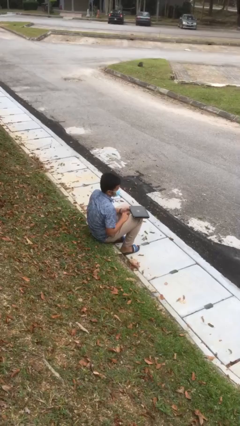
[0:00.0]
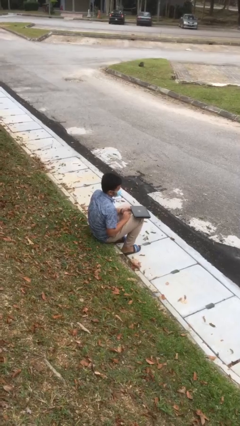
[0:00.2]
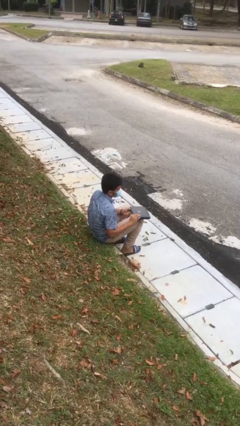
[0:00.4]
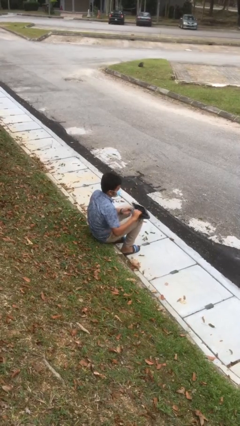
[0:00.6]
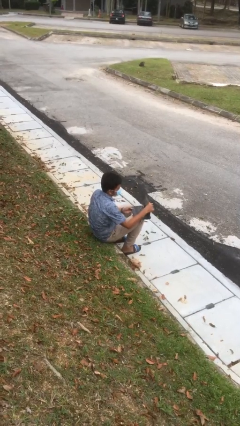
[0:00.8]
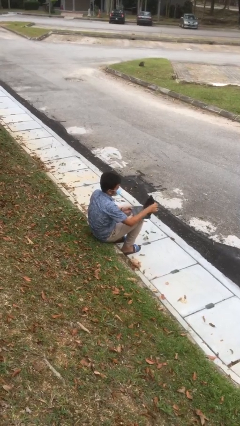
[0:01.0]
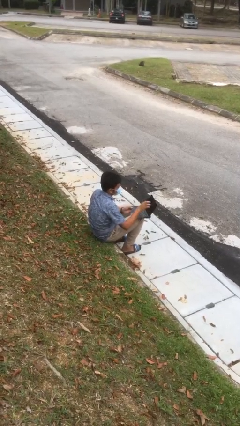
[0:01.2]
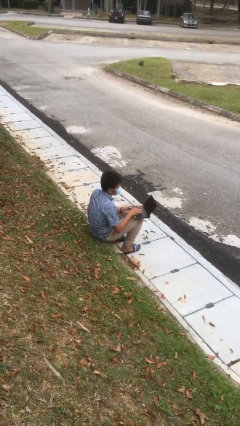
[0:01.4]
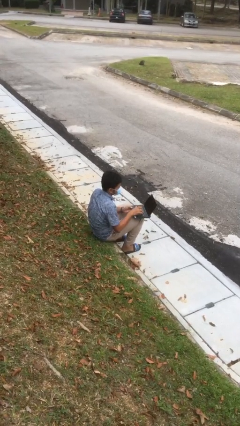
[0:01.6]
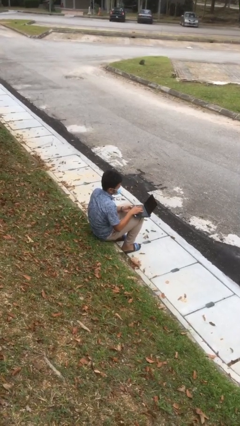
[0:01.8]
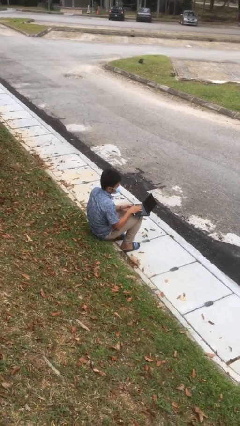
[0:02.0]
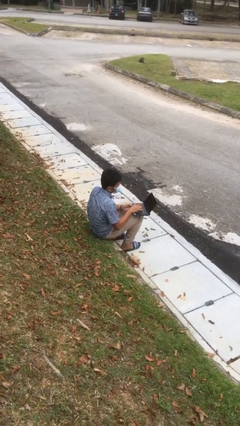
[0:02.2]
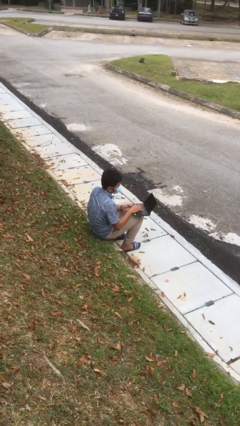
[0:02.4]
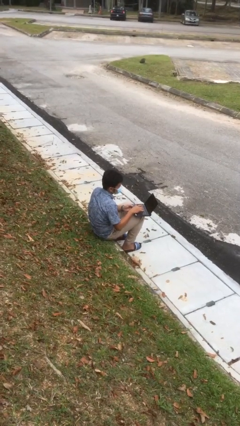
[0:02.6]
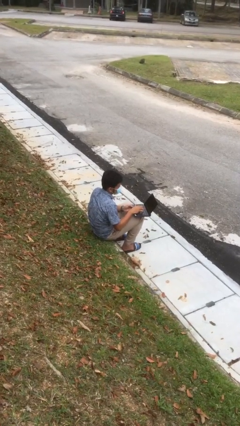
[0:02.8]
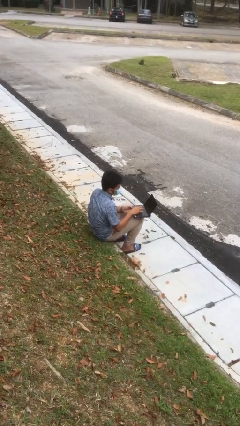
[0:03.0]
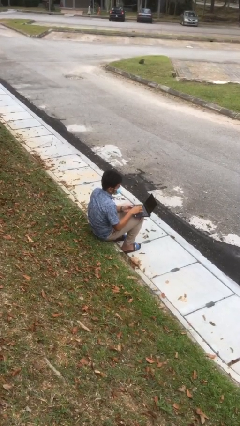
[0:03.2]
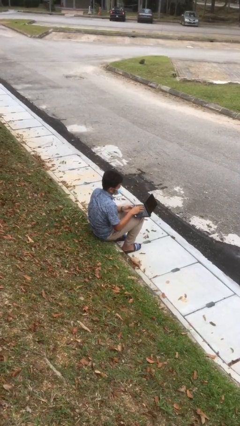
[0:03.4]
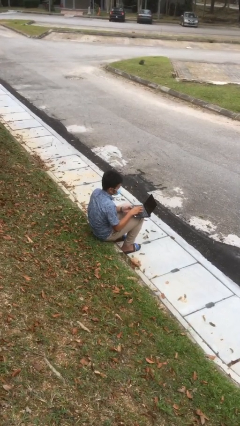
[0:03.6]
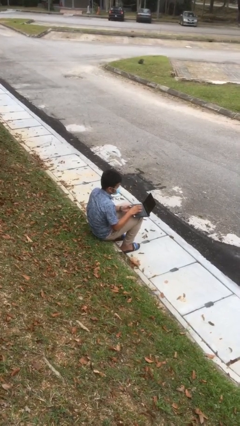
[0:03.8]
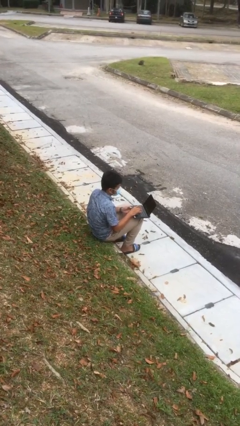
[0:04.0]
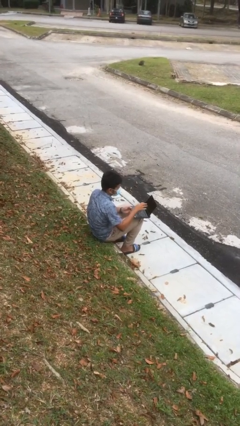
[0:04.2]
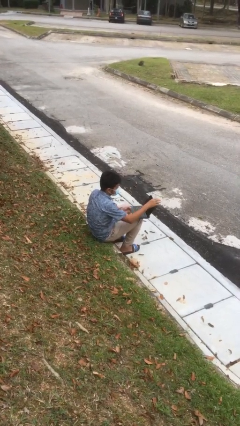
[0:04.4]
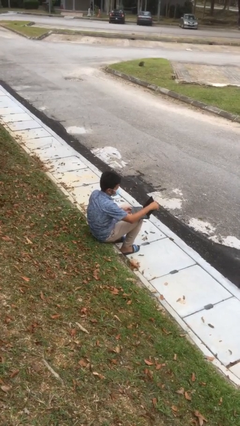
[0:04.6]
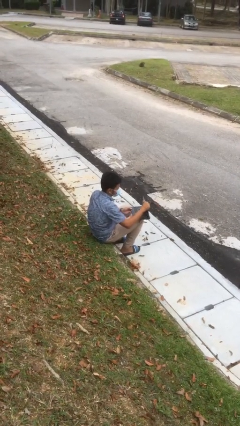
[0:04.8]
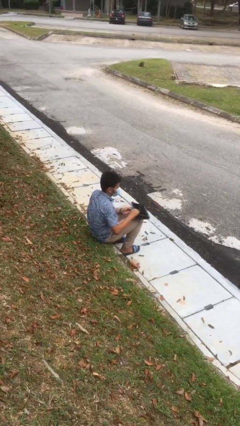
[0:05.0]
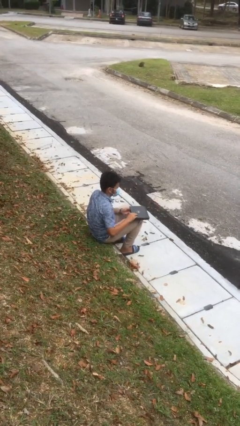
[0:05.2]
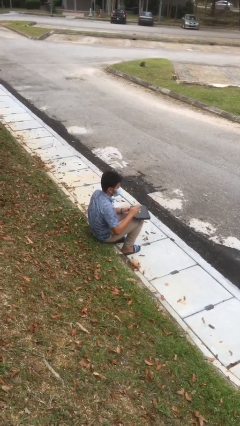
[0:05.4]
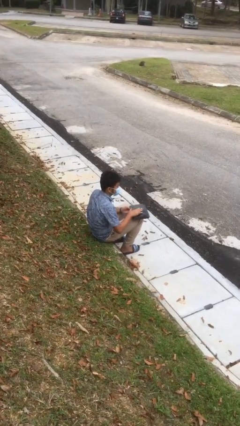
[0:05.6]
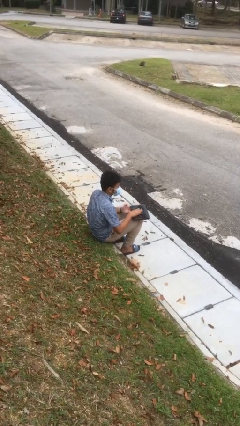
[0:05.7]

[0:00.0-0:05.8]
person interacts with laptop

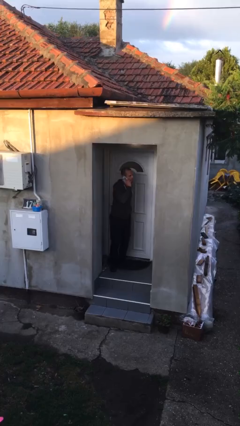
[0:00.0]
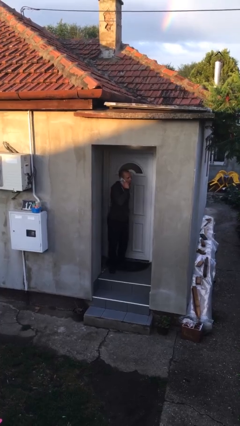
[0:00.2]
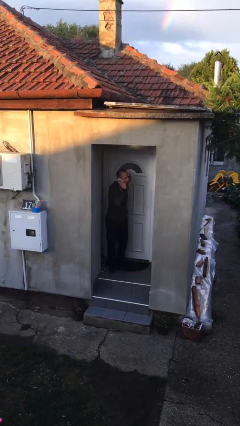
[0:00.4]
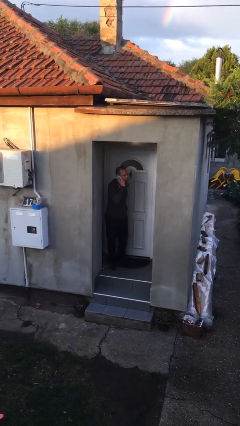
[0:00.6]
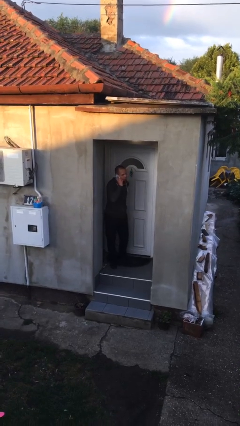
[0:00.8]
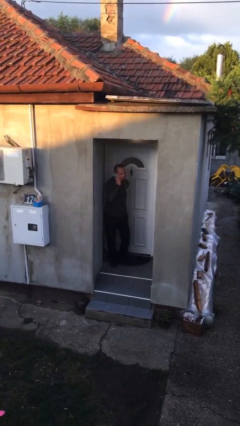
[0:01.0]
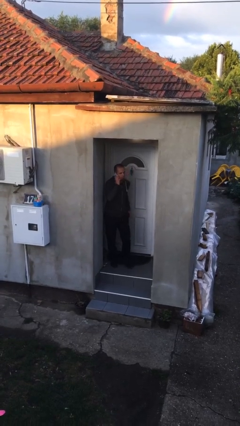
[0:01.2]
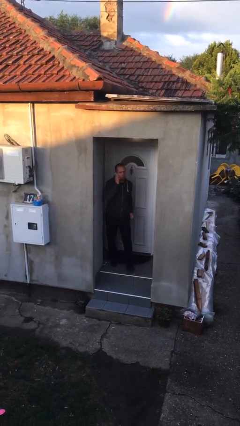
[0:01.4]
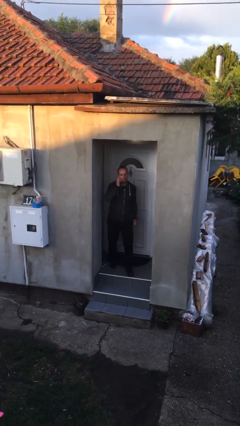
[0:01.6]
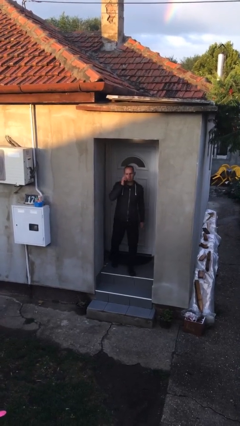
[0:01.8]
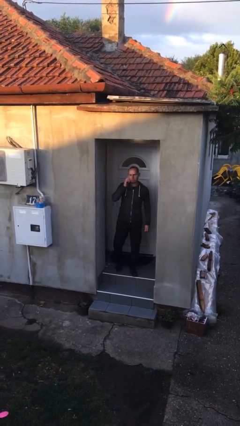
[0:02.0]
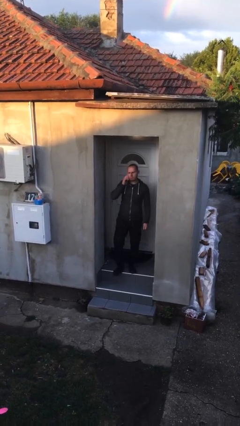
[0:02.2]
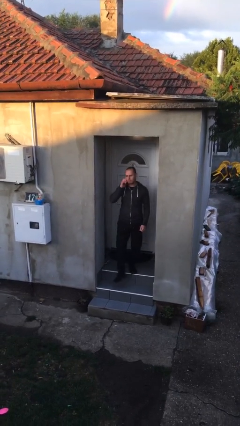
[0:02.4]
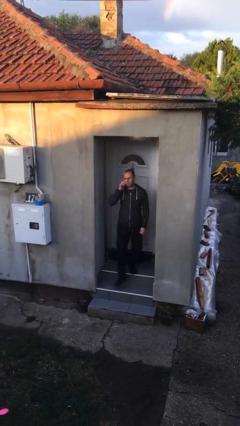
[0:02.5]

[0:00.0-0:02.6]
person closes facility door

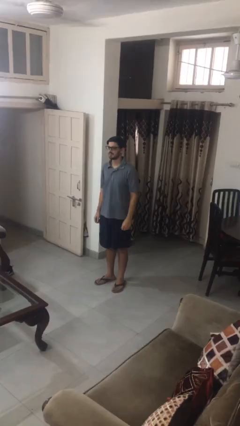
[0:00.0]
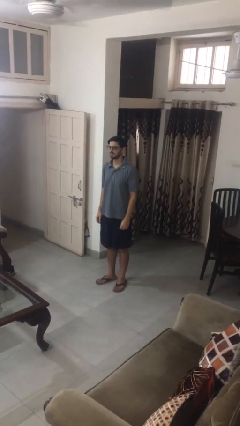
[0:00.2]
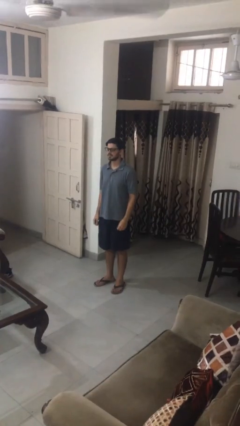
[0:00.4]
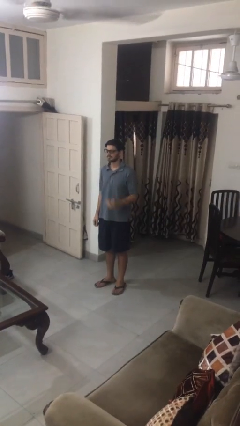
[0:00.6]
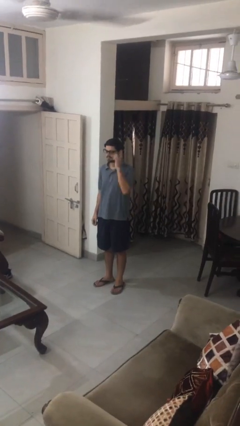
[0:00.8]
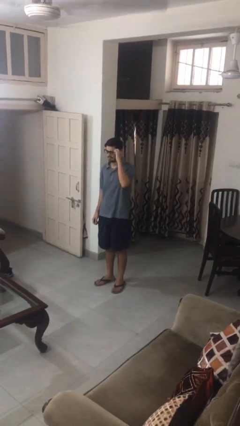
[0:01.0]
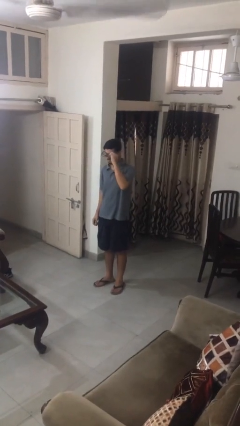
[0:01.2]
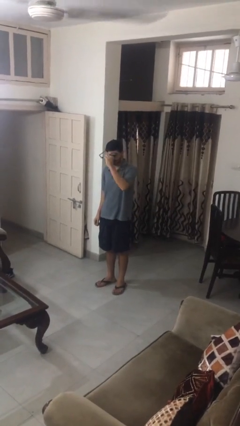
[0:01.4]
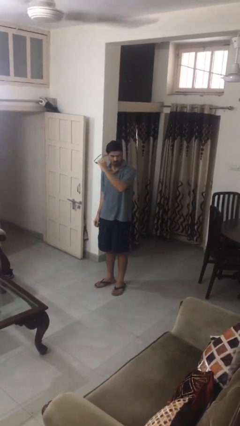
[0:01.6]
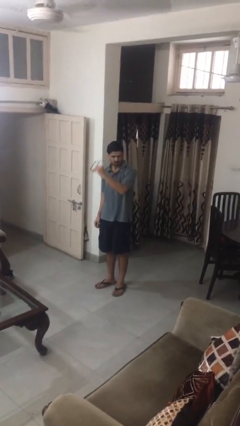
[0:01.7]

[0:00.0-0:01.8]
person takes off glasses

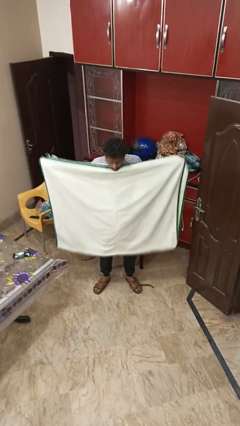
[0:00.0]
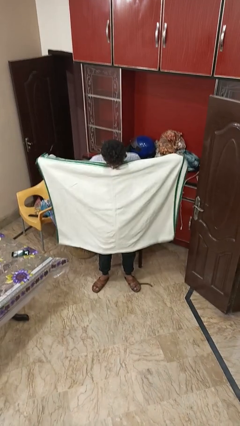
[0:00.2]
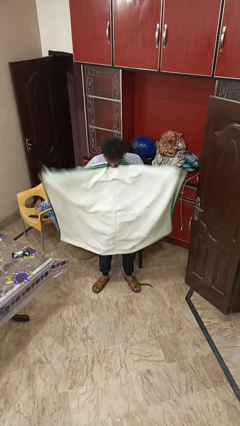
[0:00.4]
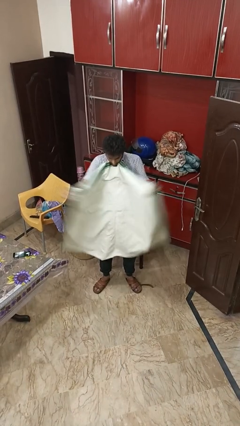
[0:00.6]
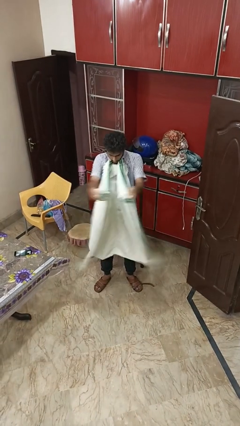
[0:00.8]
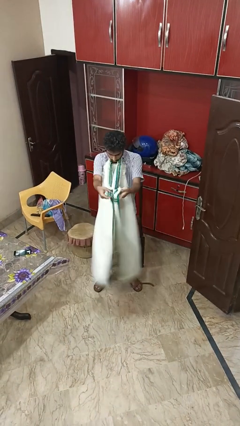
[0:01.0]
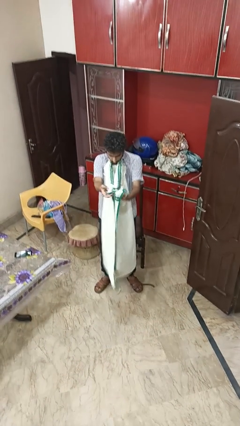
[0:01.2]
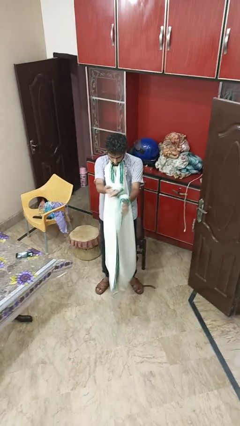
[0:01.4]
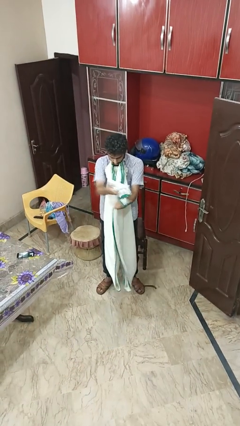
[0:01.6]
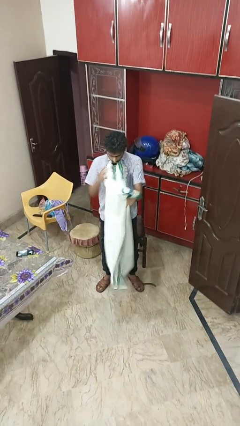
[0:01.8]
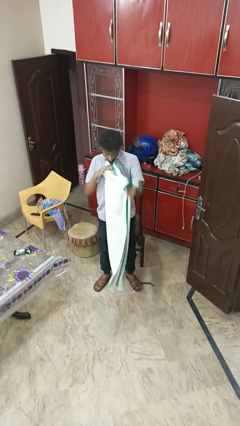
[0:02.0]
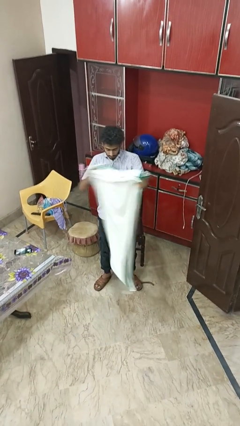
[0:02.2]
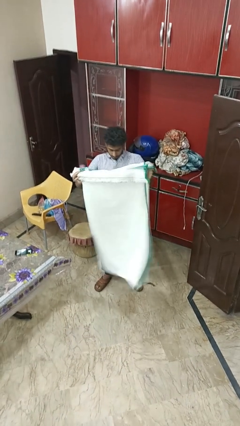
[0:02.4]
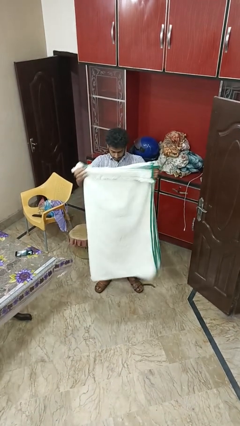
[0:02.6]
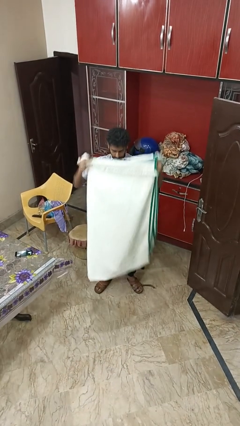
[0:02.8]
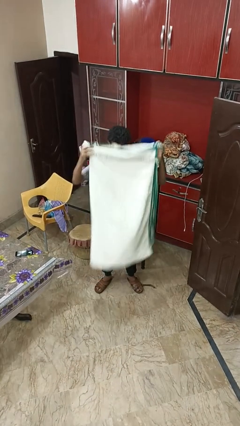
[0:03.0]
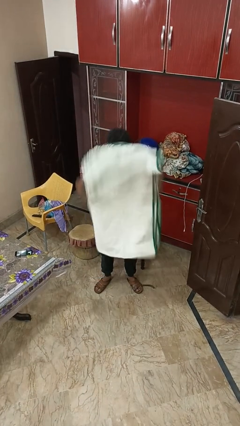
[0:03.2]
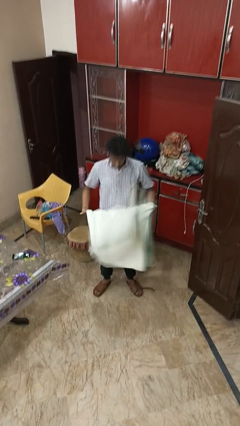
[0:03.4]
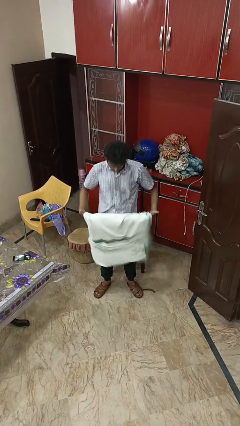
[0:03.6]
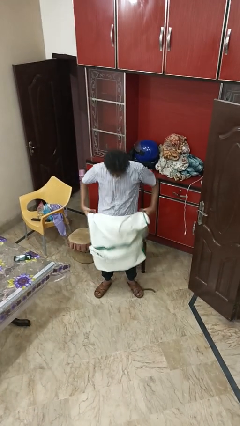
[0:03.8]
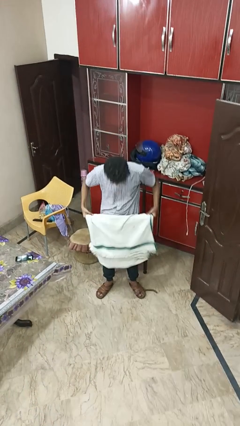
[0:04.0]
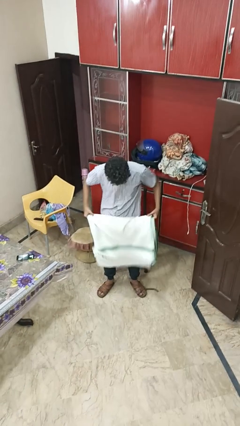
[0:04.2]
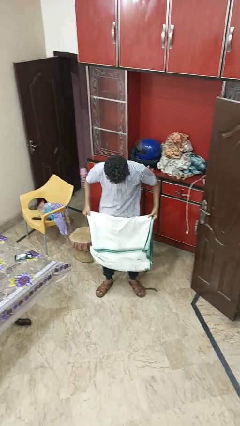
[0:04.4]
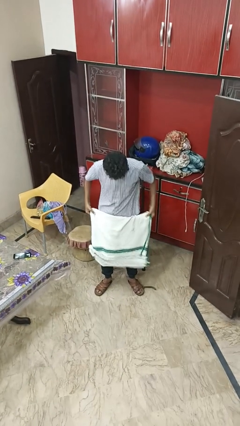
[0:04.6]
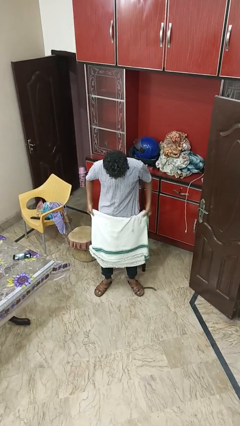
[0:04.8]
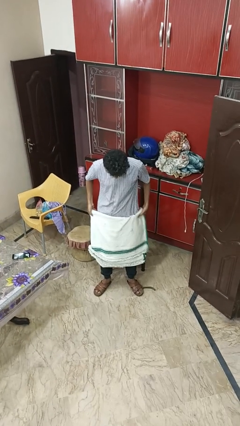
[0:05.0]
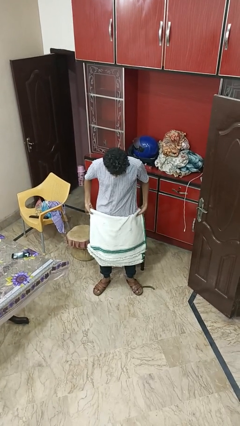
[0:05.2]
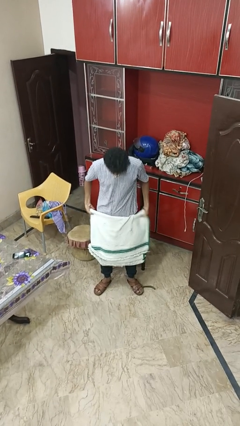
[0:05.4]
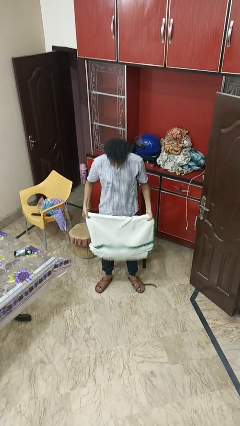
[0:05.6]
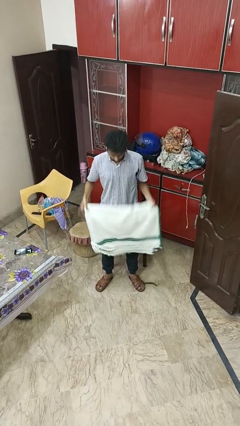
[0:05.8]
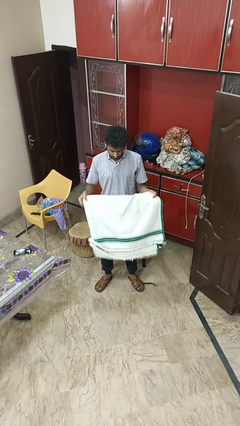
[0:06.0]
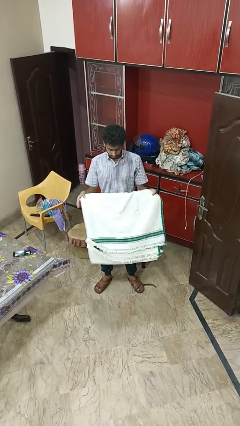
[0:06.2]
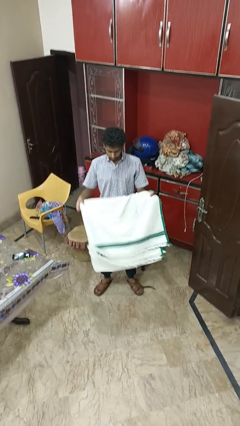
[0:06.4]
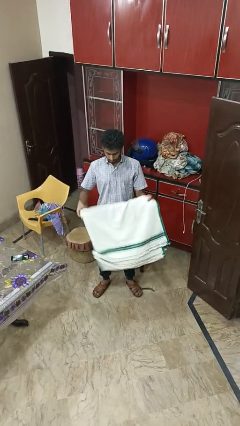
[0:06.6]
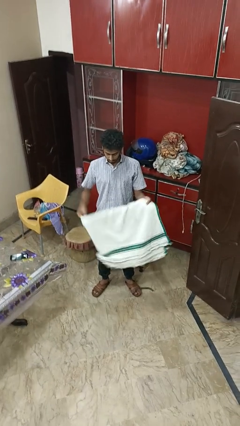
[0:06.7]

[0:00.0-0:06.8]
person folds blanket

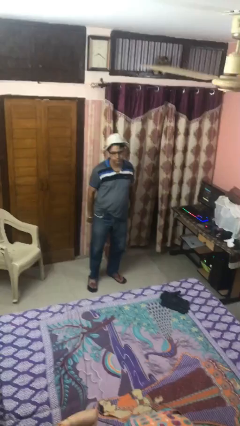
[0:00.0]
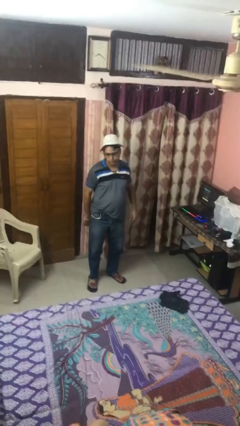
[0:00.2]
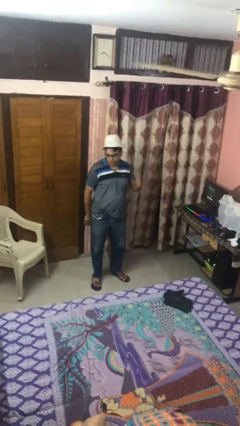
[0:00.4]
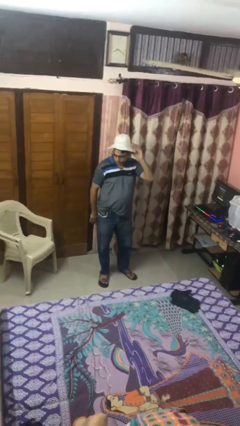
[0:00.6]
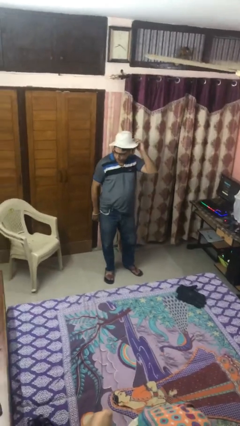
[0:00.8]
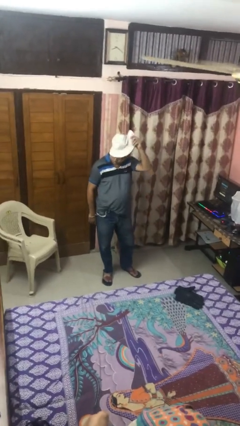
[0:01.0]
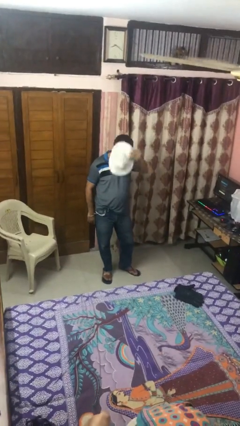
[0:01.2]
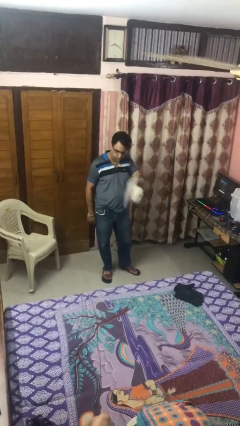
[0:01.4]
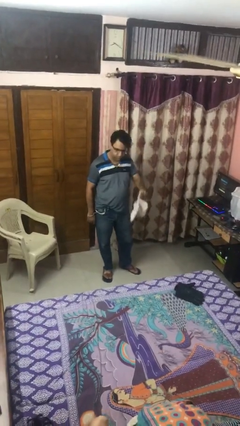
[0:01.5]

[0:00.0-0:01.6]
person takes off hat
